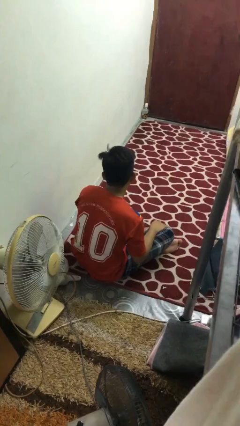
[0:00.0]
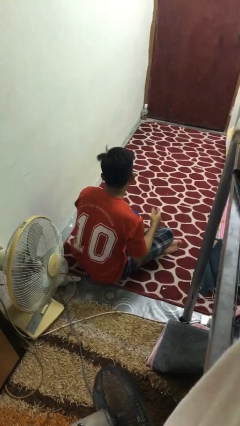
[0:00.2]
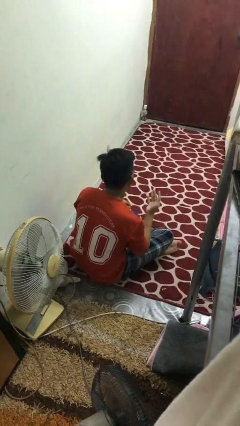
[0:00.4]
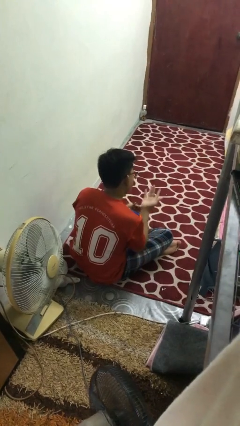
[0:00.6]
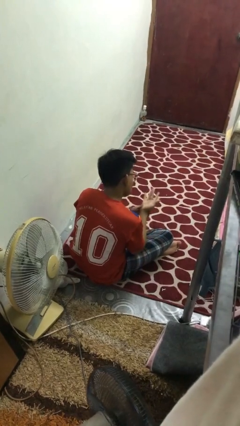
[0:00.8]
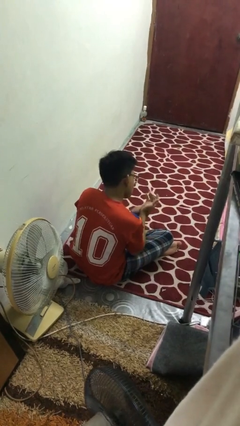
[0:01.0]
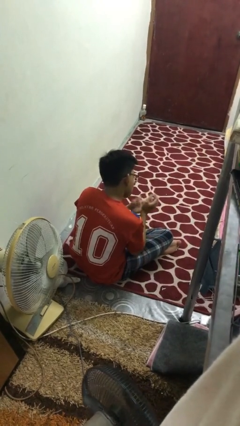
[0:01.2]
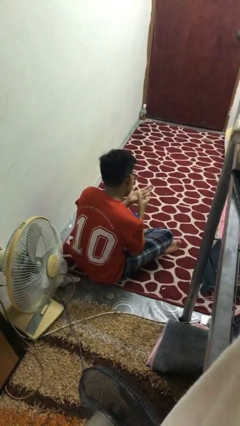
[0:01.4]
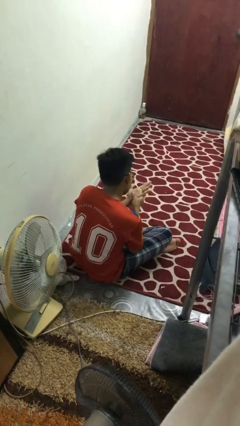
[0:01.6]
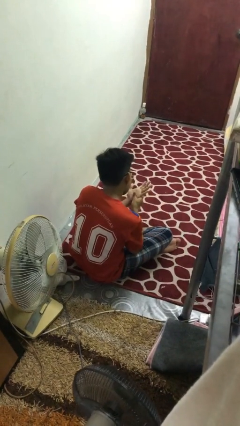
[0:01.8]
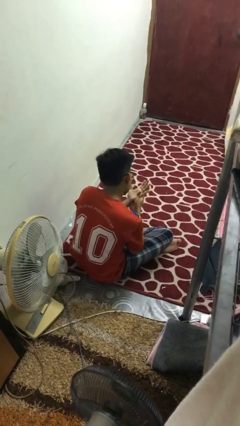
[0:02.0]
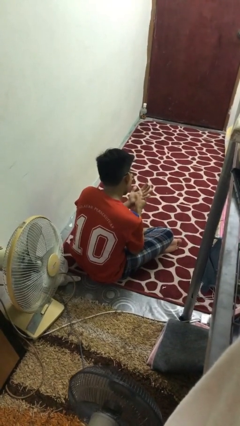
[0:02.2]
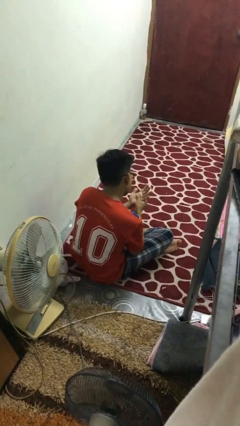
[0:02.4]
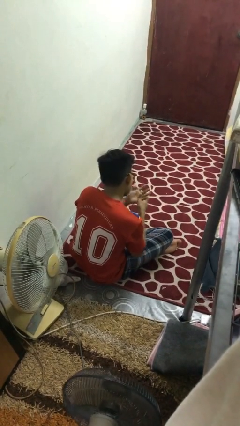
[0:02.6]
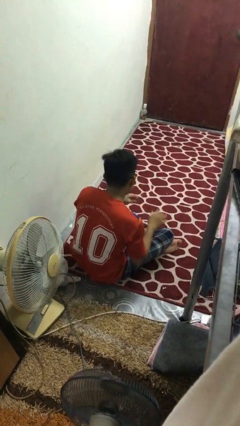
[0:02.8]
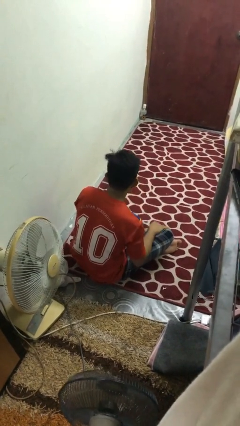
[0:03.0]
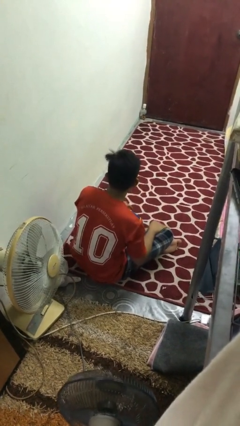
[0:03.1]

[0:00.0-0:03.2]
person looks at hands in lap

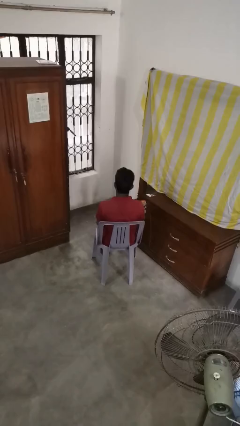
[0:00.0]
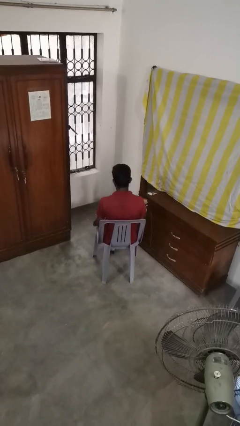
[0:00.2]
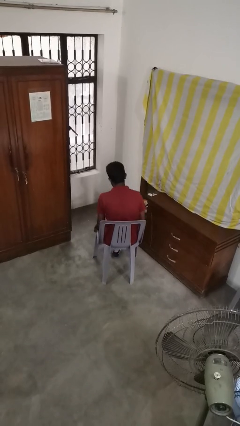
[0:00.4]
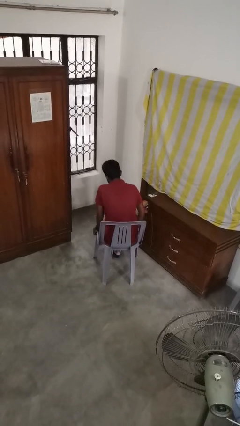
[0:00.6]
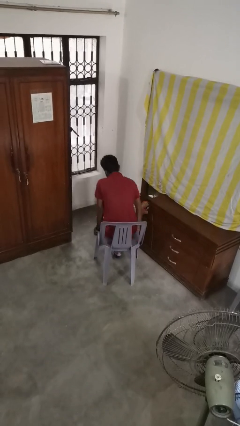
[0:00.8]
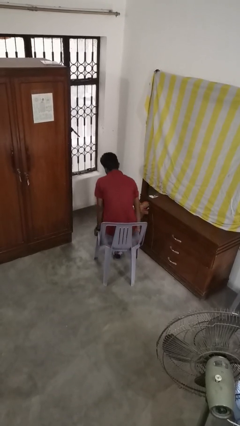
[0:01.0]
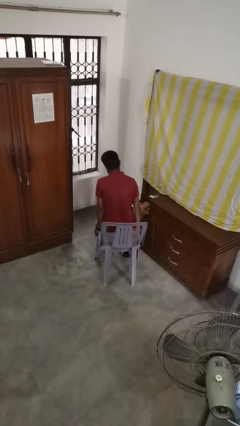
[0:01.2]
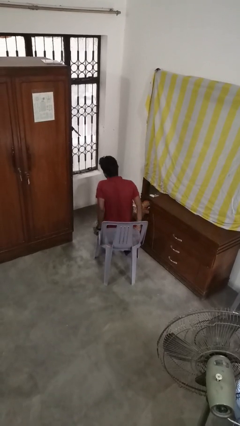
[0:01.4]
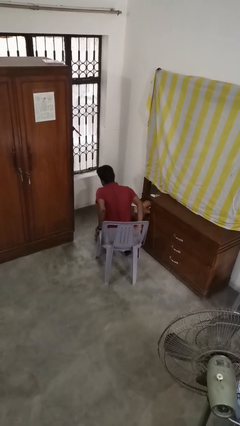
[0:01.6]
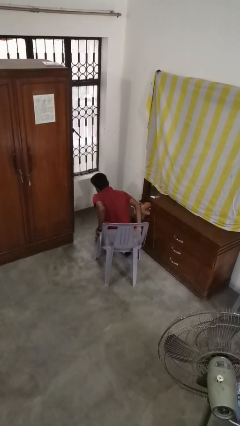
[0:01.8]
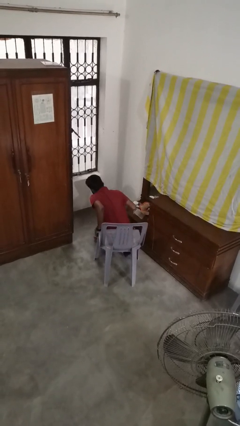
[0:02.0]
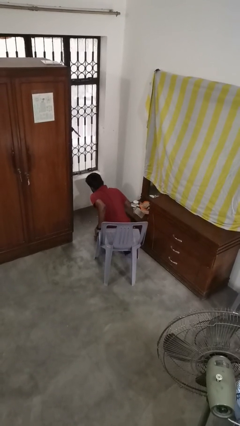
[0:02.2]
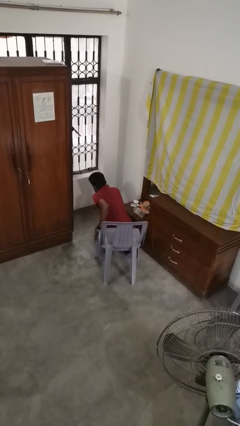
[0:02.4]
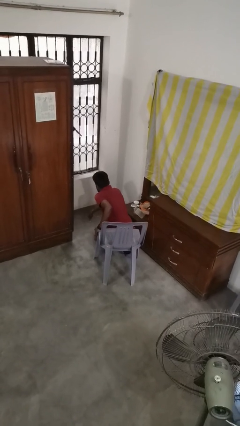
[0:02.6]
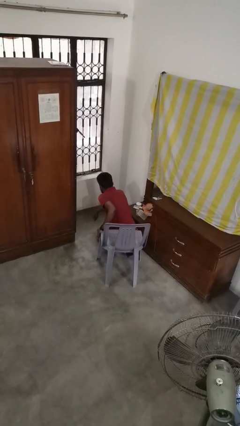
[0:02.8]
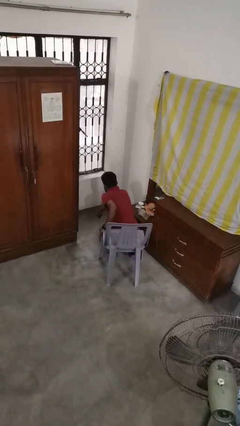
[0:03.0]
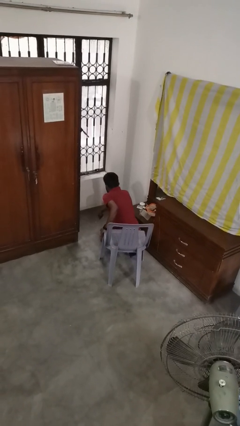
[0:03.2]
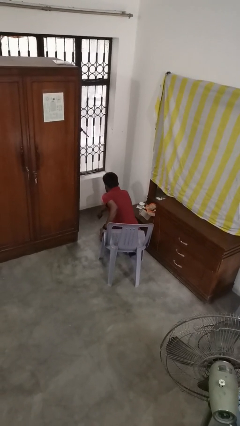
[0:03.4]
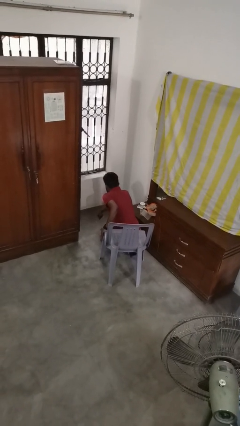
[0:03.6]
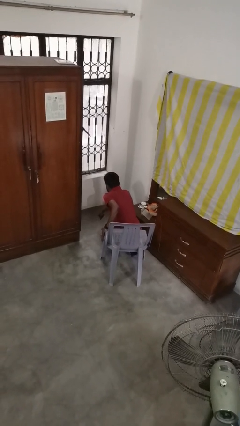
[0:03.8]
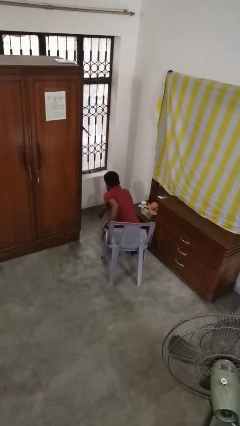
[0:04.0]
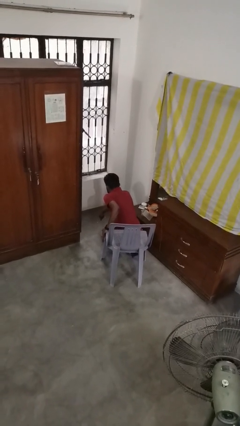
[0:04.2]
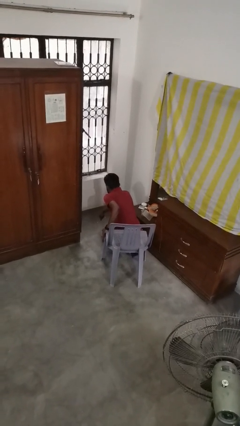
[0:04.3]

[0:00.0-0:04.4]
person falls from chair

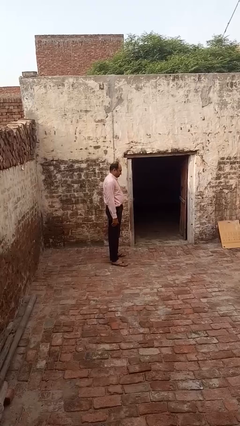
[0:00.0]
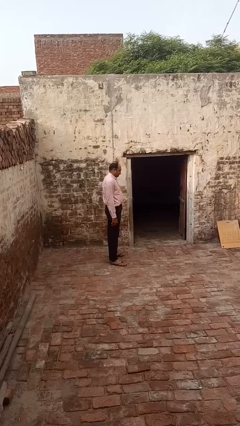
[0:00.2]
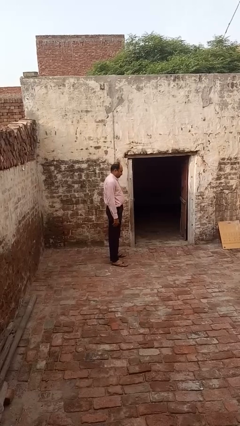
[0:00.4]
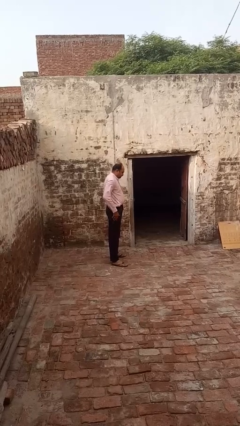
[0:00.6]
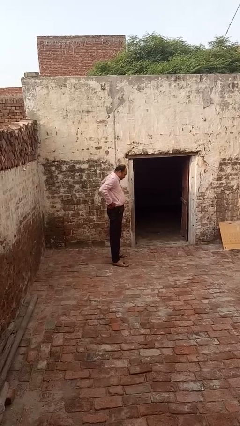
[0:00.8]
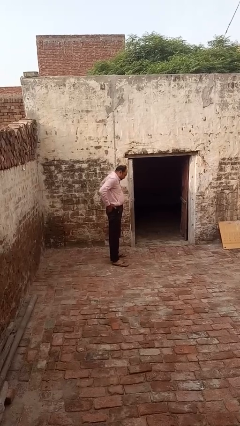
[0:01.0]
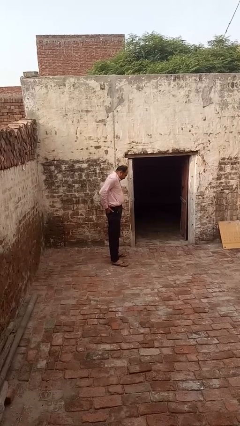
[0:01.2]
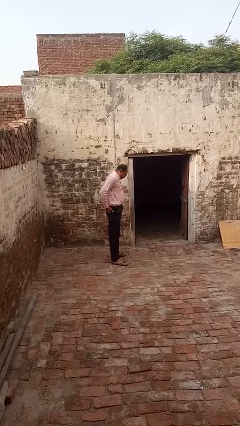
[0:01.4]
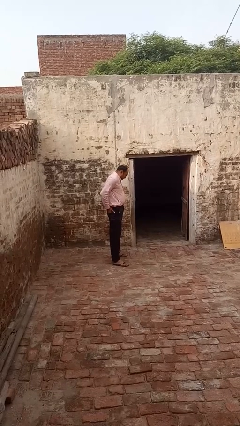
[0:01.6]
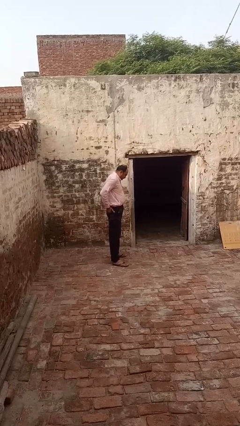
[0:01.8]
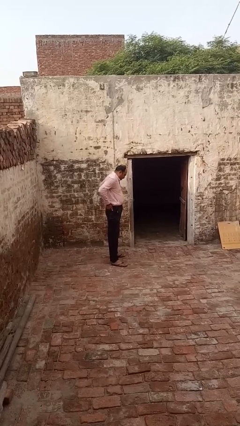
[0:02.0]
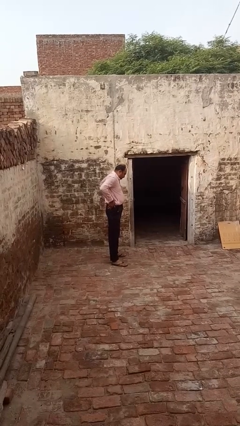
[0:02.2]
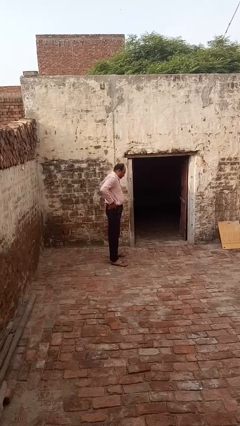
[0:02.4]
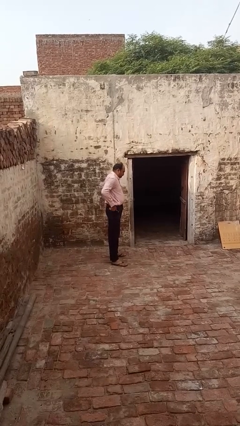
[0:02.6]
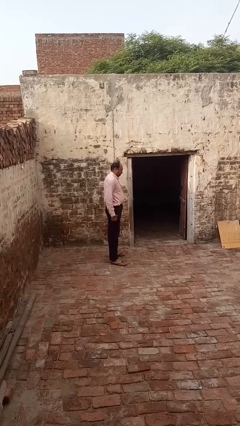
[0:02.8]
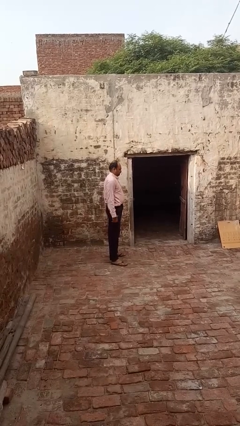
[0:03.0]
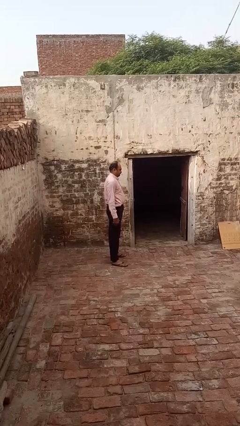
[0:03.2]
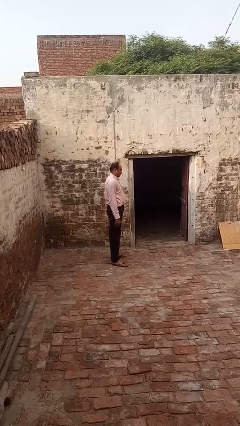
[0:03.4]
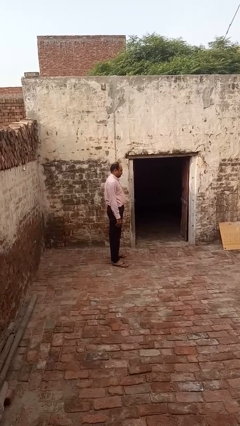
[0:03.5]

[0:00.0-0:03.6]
person puts hands in back pockets

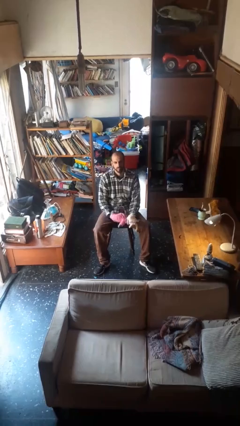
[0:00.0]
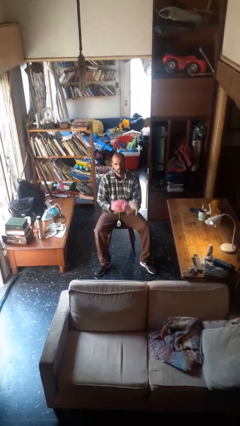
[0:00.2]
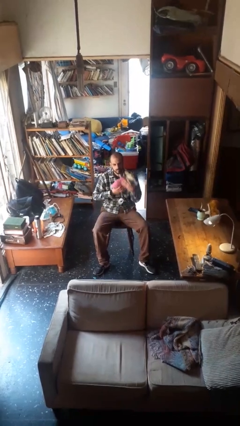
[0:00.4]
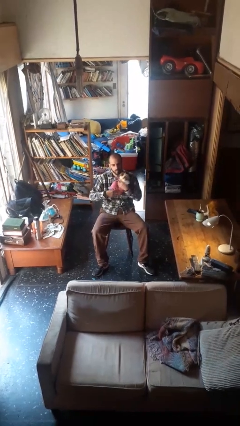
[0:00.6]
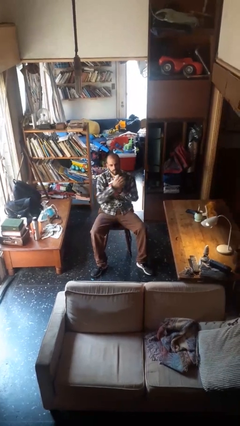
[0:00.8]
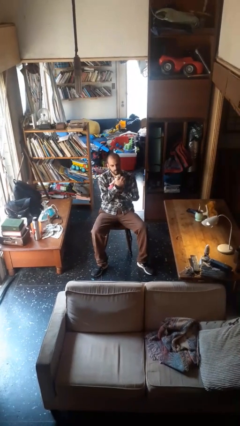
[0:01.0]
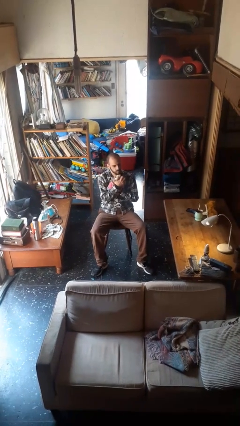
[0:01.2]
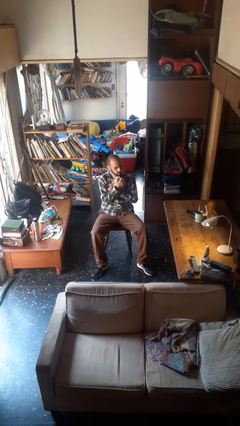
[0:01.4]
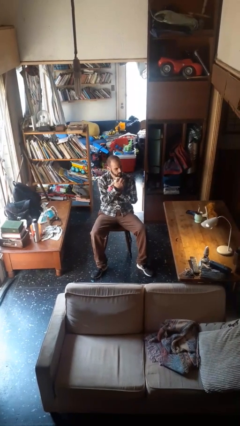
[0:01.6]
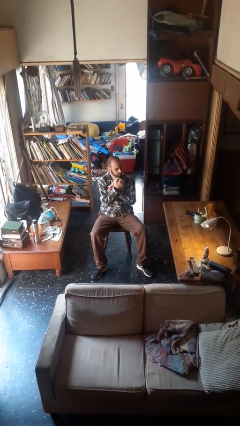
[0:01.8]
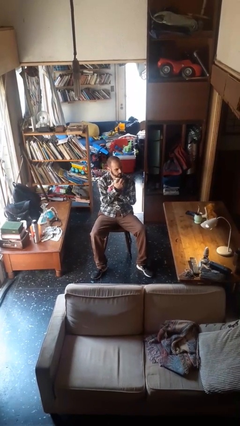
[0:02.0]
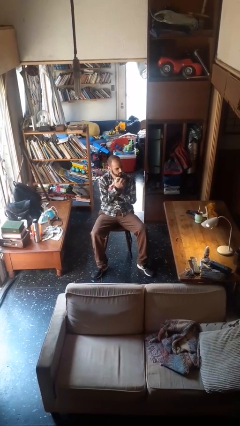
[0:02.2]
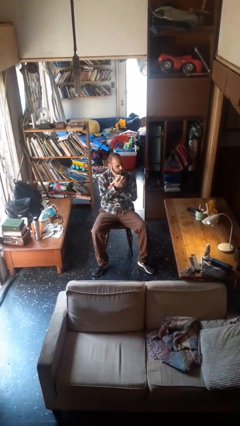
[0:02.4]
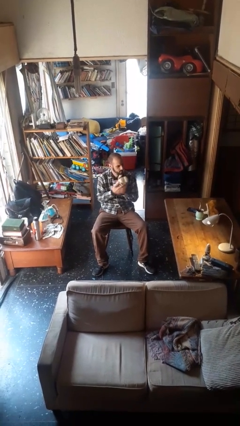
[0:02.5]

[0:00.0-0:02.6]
person squeezes object

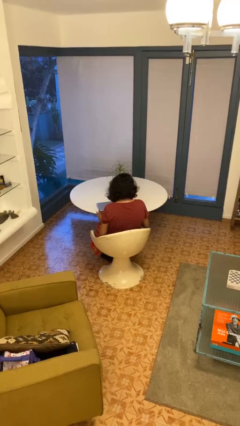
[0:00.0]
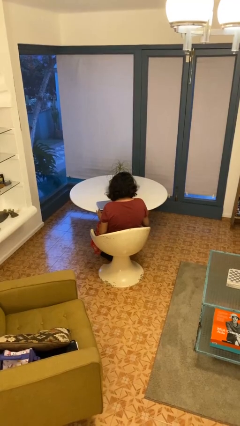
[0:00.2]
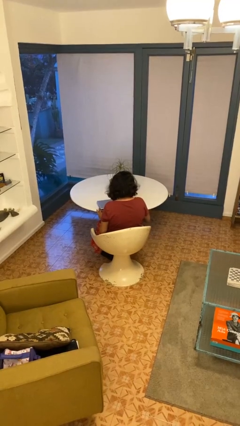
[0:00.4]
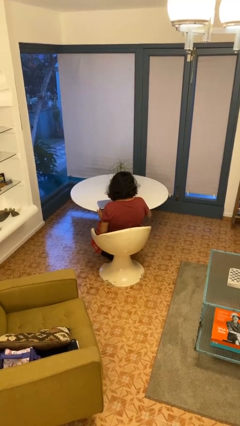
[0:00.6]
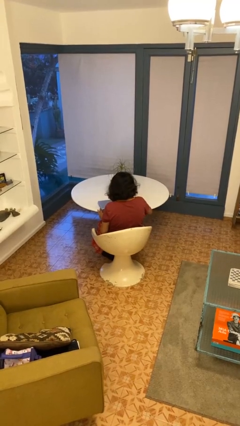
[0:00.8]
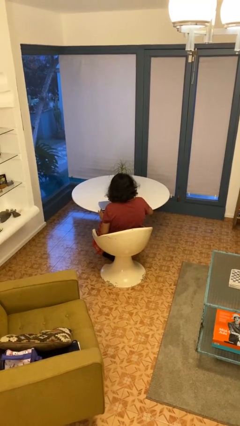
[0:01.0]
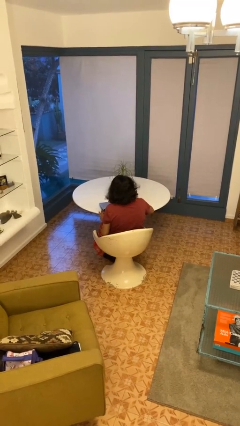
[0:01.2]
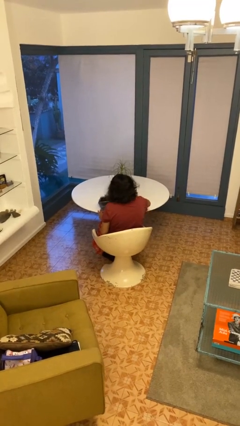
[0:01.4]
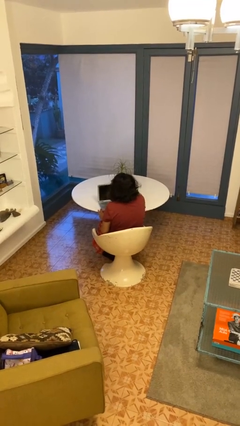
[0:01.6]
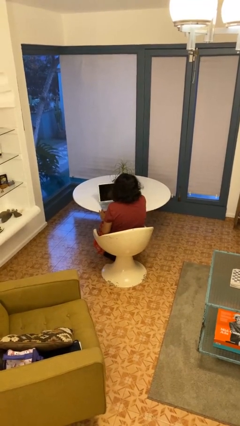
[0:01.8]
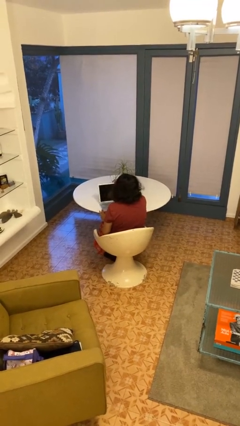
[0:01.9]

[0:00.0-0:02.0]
person opens laptop

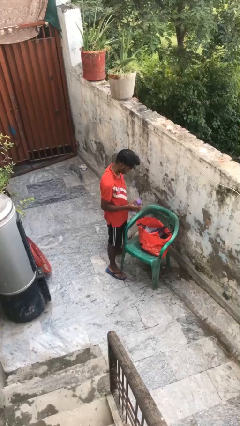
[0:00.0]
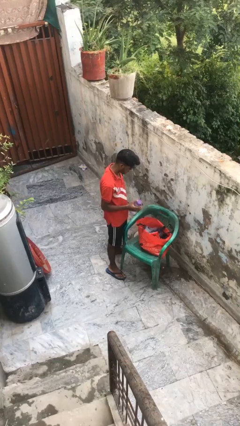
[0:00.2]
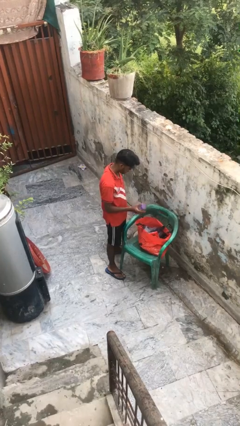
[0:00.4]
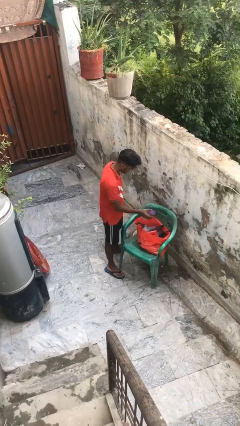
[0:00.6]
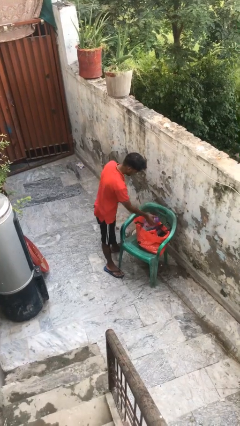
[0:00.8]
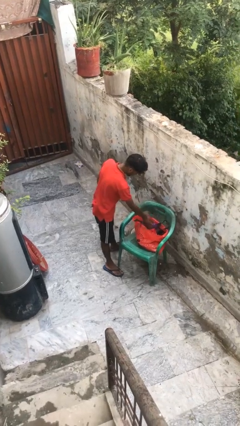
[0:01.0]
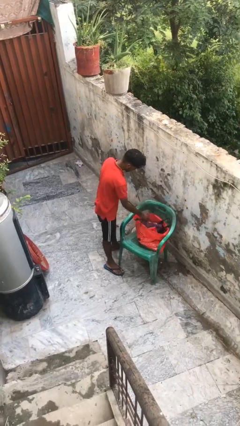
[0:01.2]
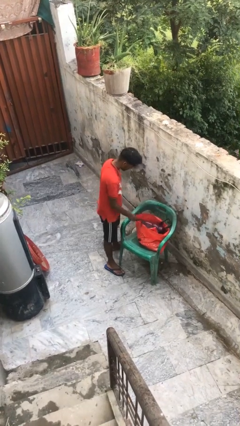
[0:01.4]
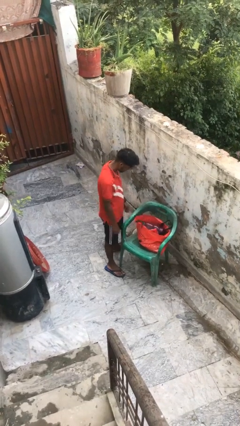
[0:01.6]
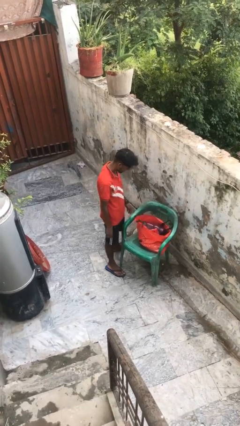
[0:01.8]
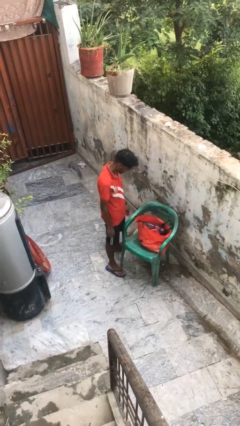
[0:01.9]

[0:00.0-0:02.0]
person puts object into bag
